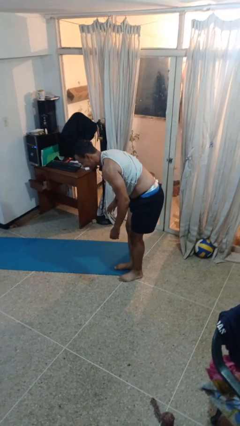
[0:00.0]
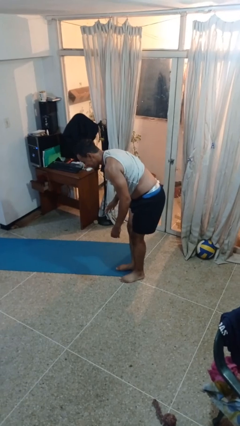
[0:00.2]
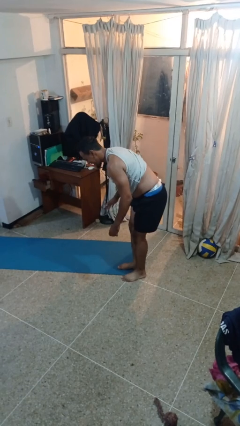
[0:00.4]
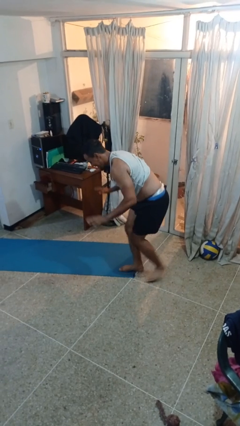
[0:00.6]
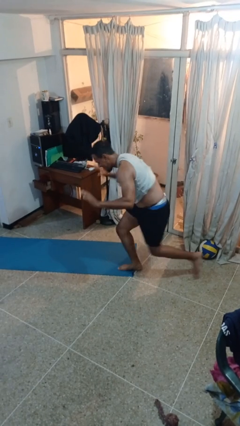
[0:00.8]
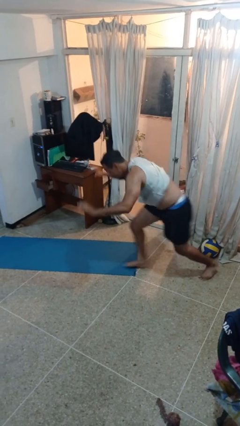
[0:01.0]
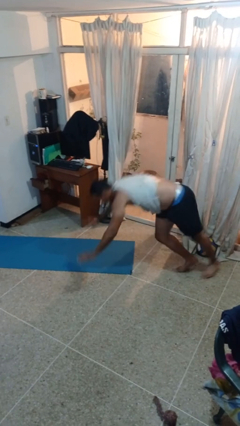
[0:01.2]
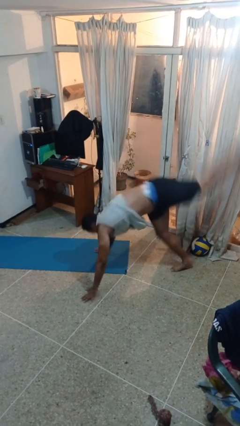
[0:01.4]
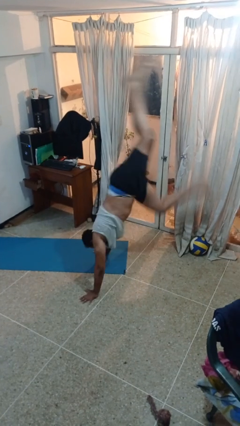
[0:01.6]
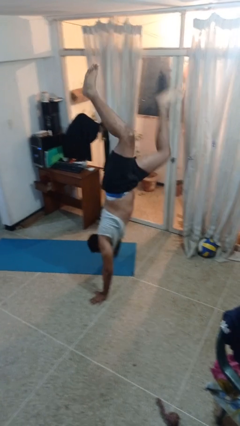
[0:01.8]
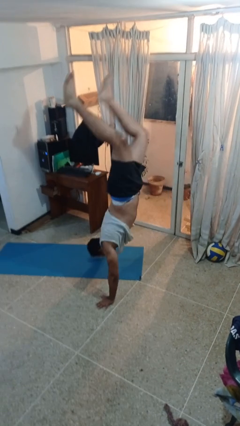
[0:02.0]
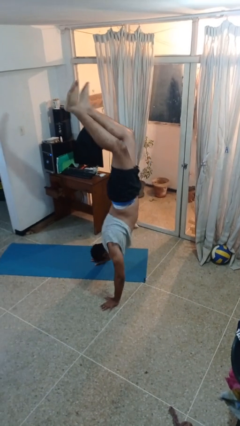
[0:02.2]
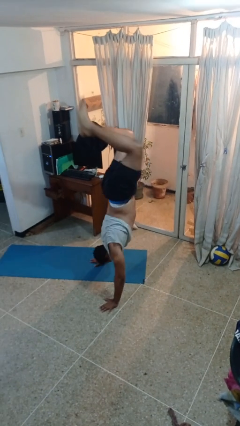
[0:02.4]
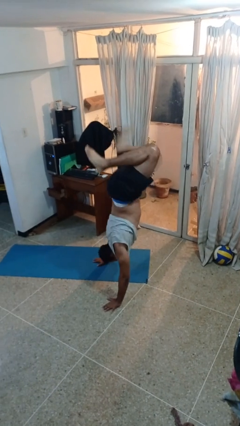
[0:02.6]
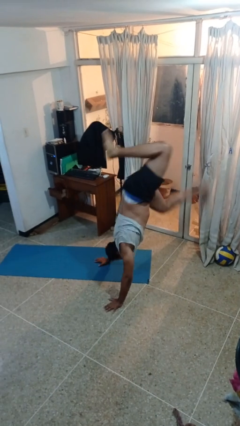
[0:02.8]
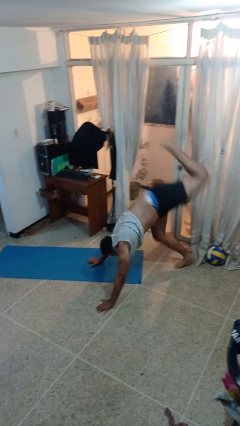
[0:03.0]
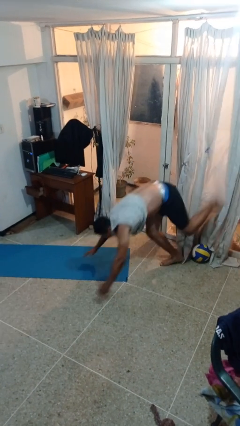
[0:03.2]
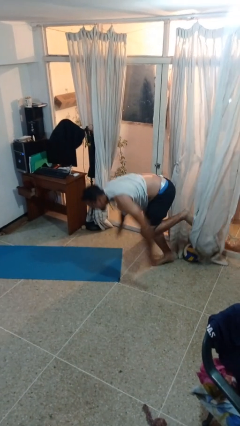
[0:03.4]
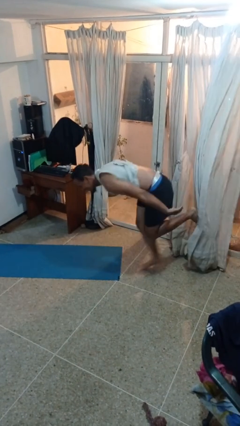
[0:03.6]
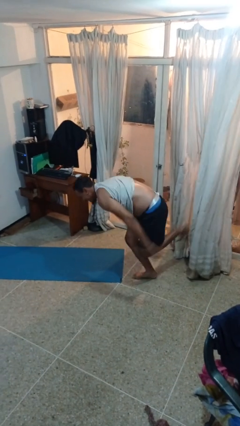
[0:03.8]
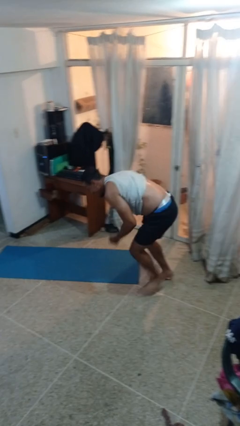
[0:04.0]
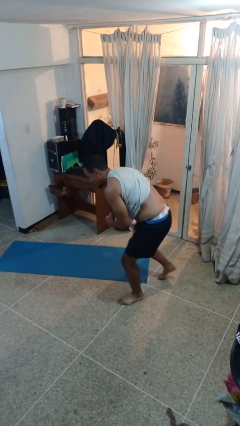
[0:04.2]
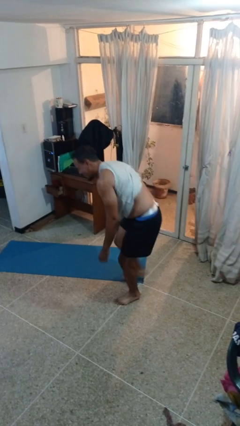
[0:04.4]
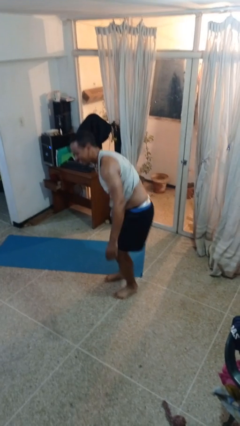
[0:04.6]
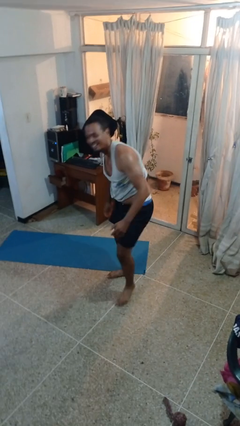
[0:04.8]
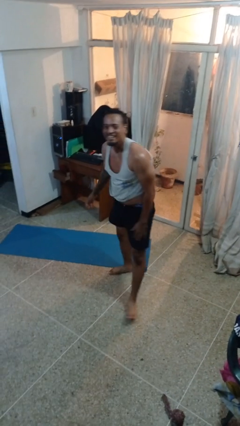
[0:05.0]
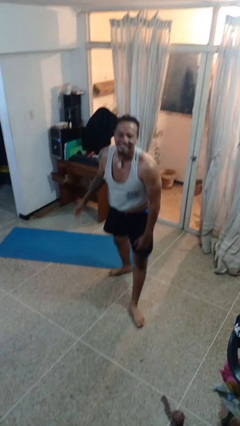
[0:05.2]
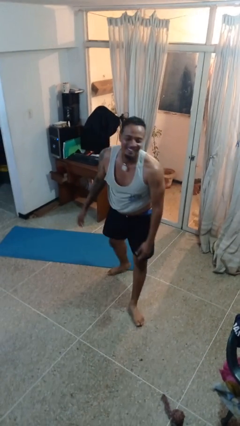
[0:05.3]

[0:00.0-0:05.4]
person handstand

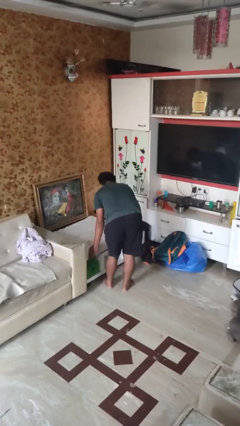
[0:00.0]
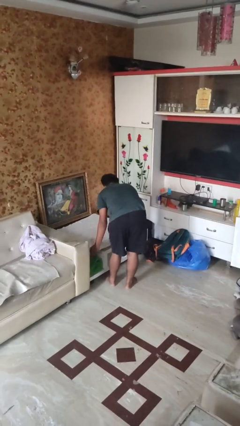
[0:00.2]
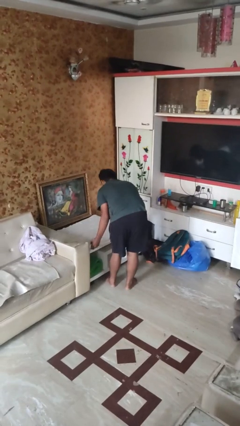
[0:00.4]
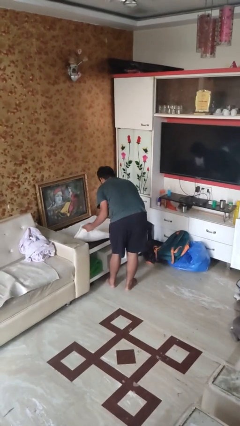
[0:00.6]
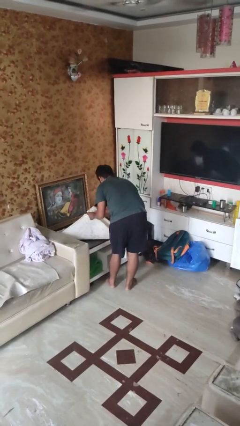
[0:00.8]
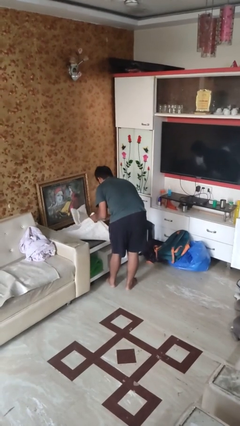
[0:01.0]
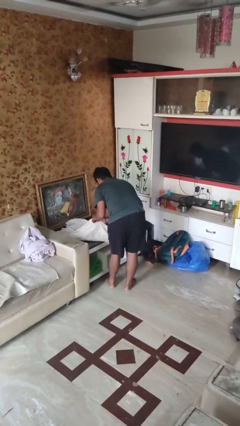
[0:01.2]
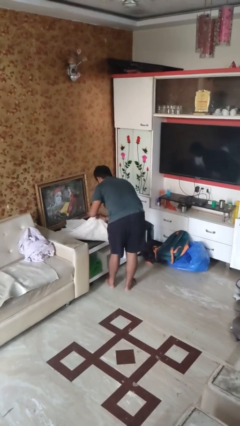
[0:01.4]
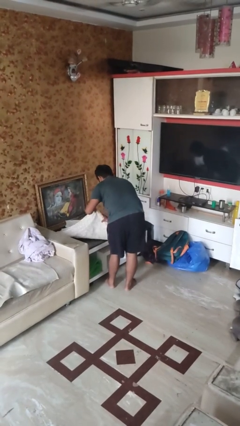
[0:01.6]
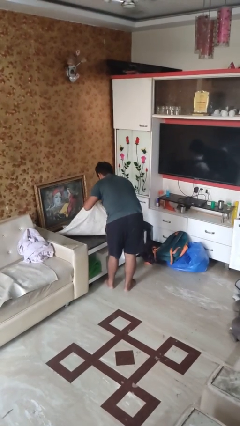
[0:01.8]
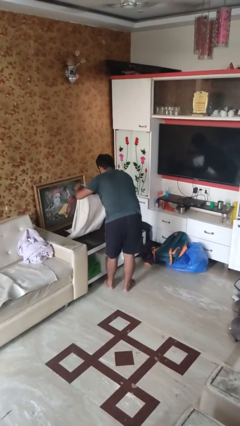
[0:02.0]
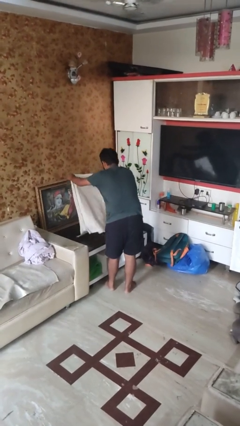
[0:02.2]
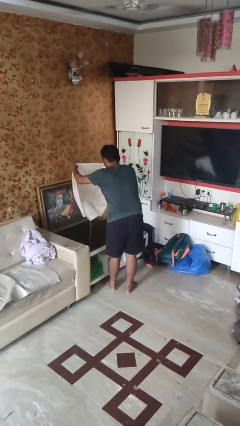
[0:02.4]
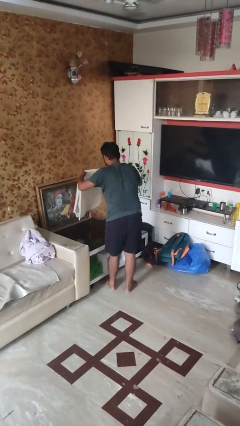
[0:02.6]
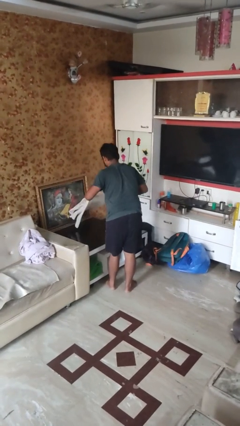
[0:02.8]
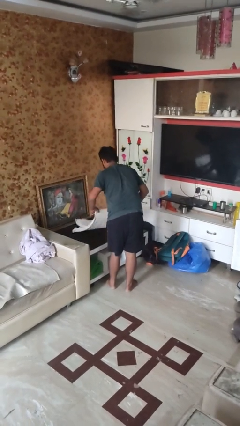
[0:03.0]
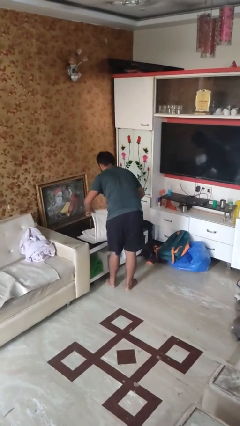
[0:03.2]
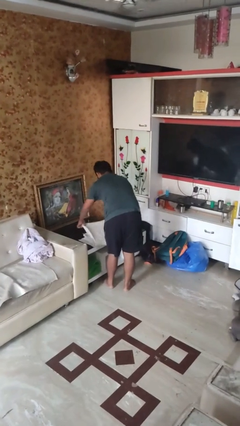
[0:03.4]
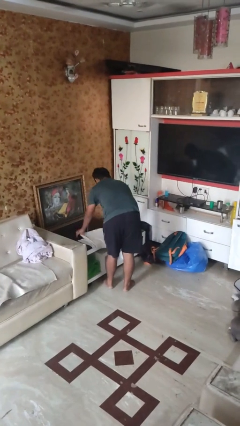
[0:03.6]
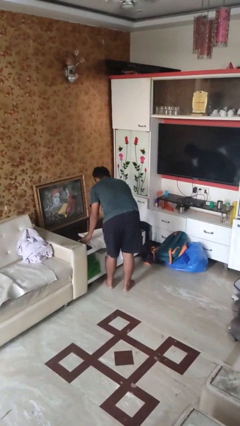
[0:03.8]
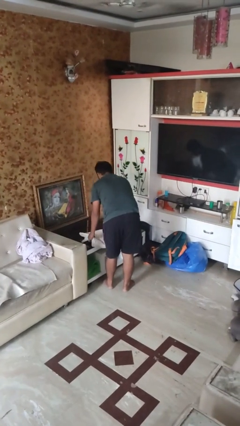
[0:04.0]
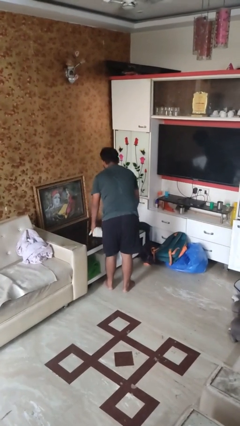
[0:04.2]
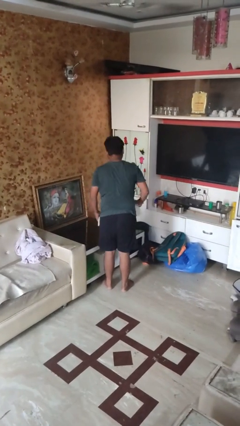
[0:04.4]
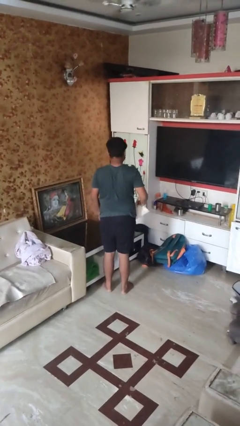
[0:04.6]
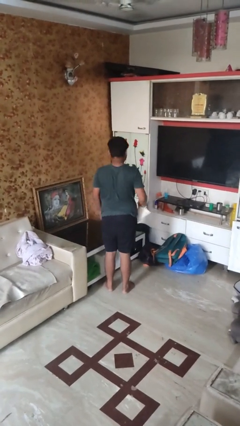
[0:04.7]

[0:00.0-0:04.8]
person folds tablecloth

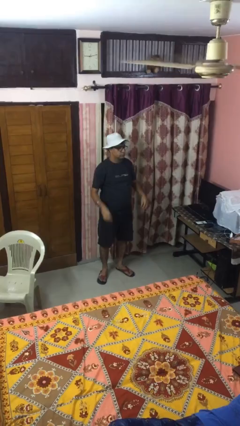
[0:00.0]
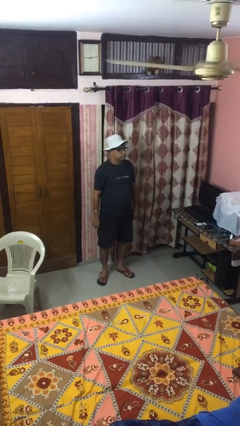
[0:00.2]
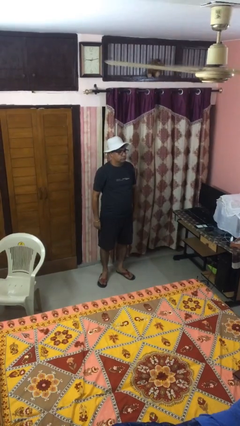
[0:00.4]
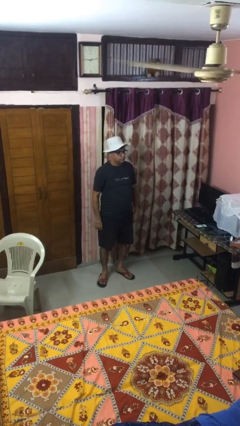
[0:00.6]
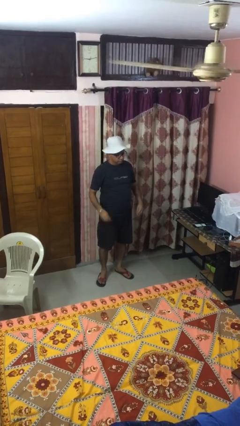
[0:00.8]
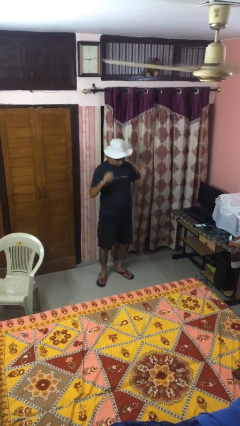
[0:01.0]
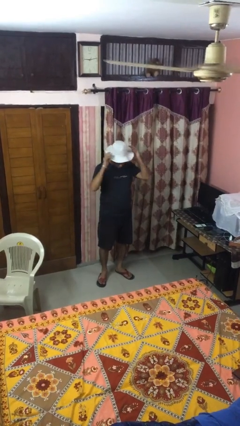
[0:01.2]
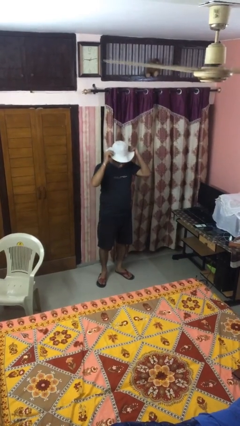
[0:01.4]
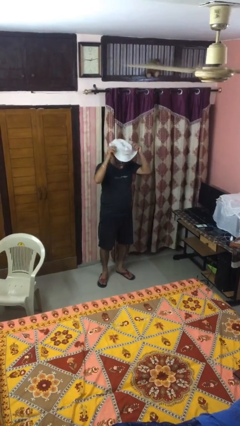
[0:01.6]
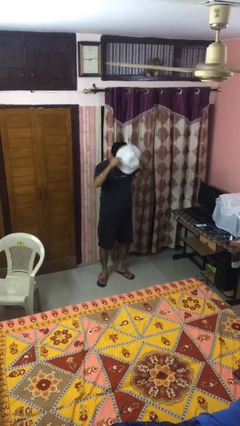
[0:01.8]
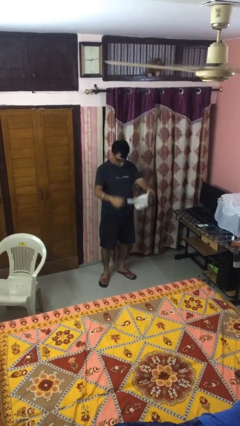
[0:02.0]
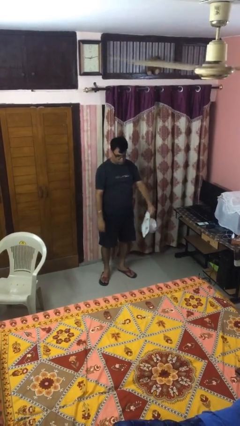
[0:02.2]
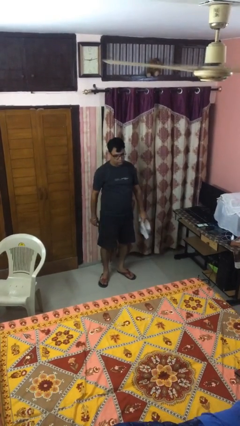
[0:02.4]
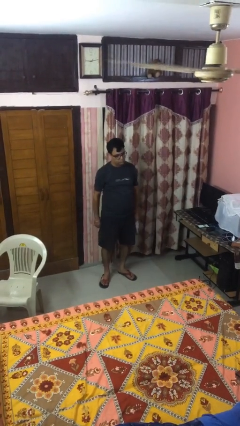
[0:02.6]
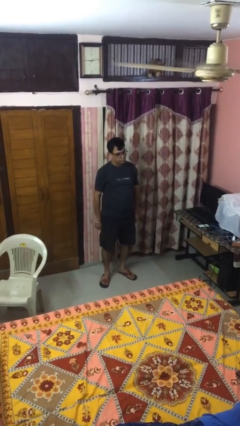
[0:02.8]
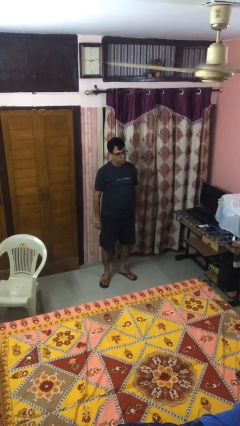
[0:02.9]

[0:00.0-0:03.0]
person takes off hat

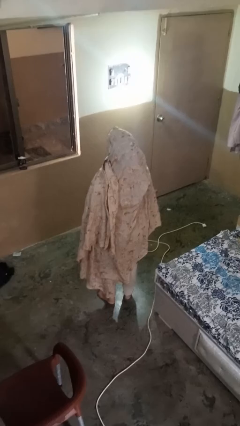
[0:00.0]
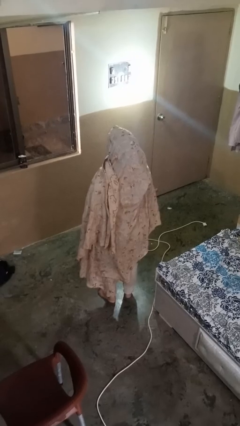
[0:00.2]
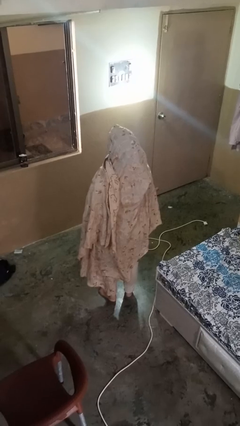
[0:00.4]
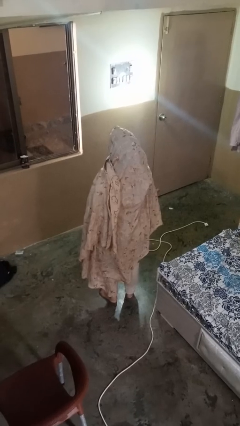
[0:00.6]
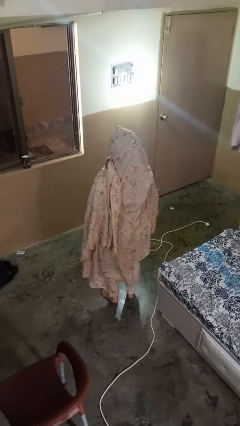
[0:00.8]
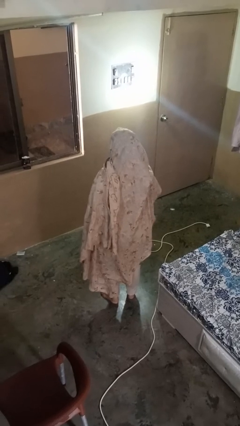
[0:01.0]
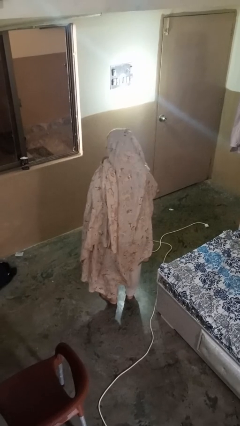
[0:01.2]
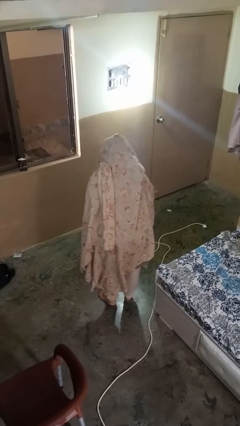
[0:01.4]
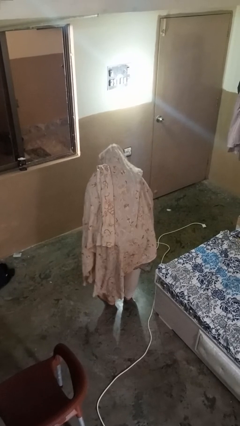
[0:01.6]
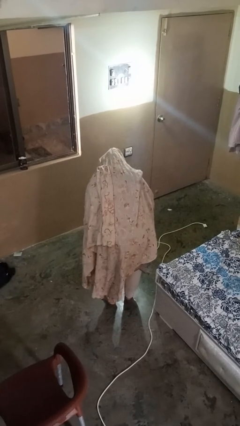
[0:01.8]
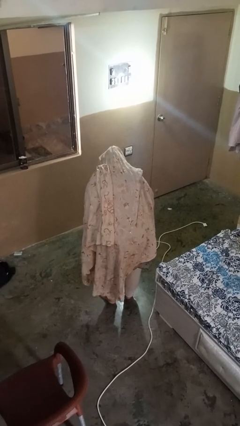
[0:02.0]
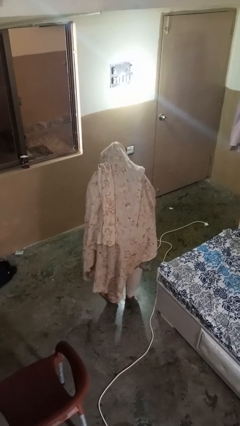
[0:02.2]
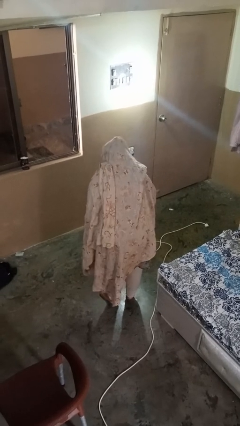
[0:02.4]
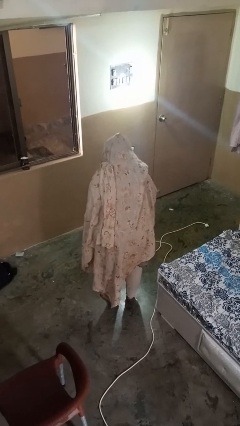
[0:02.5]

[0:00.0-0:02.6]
person bows

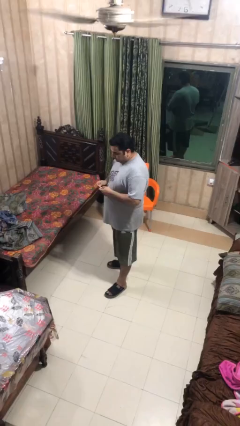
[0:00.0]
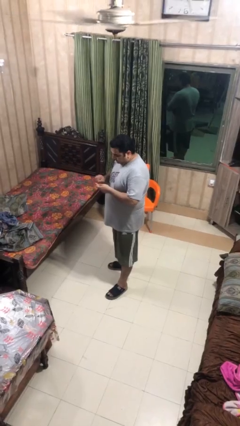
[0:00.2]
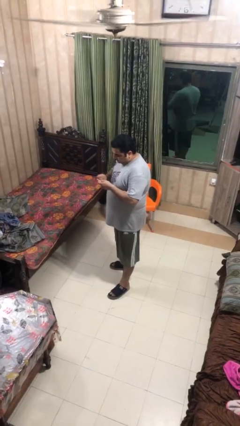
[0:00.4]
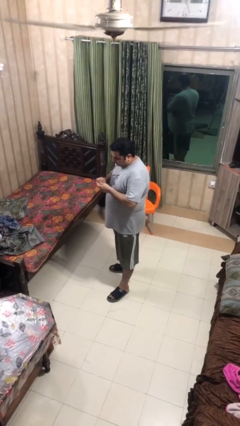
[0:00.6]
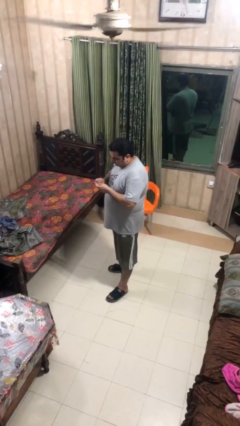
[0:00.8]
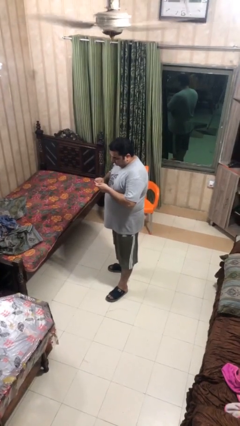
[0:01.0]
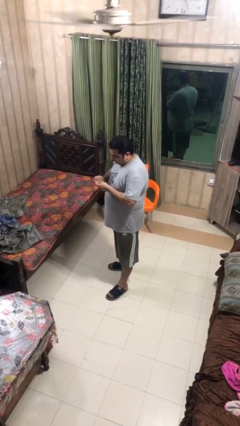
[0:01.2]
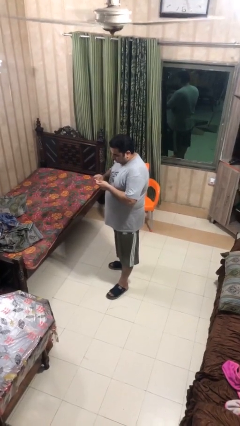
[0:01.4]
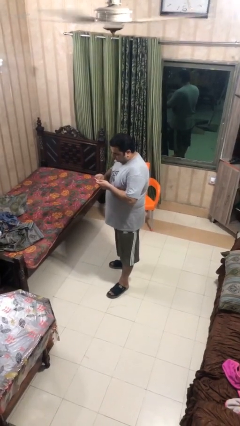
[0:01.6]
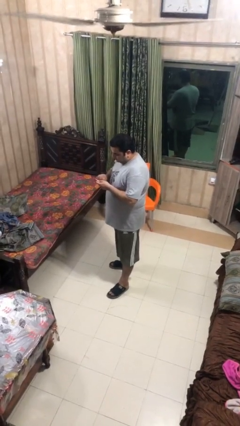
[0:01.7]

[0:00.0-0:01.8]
person files fingernails

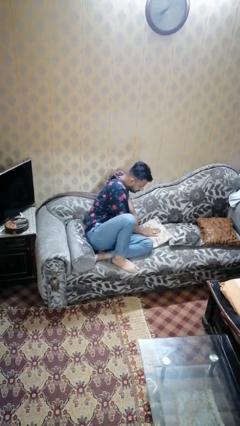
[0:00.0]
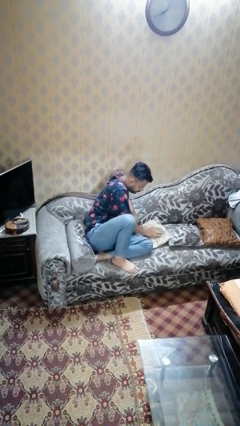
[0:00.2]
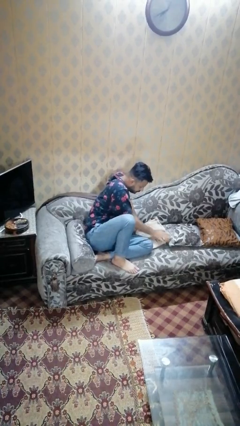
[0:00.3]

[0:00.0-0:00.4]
person searches in couch
